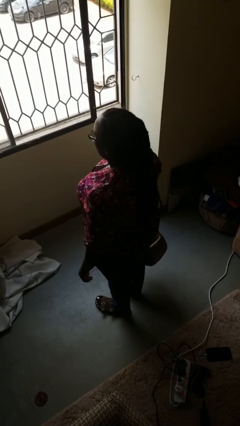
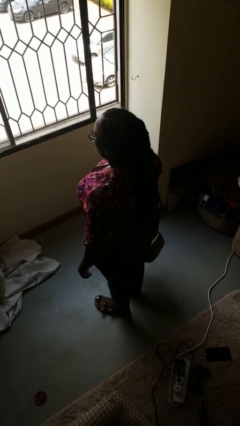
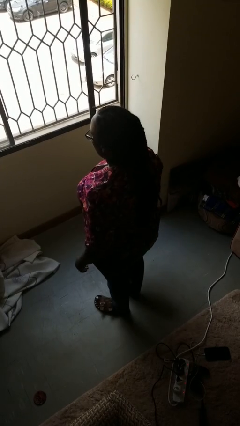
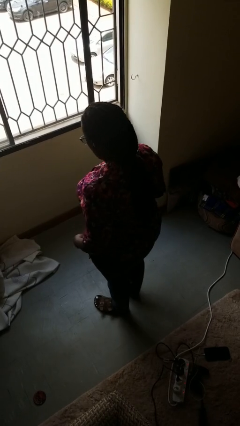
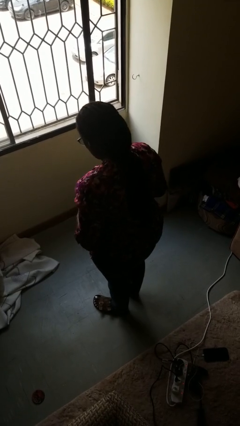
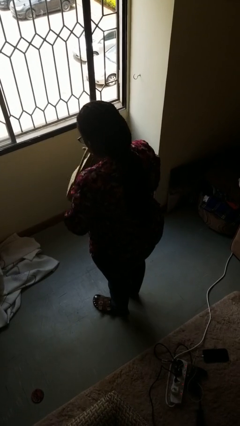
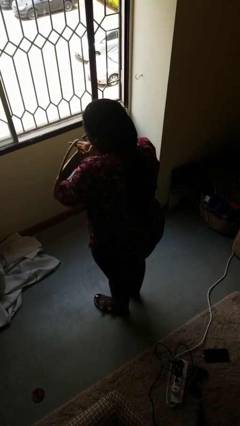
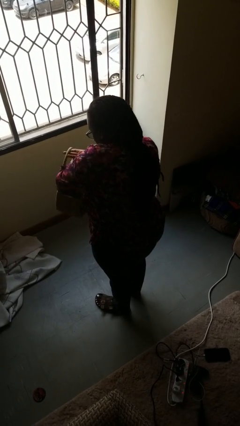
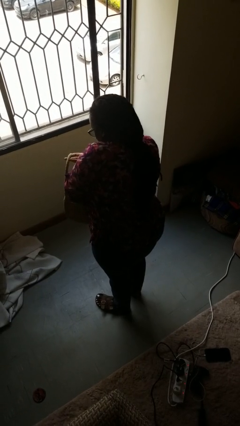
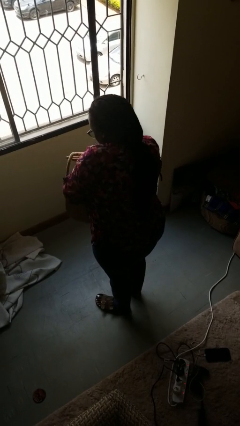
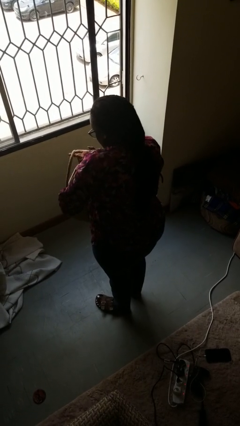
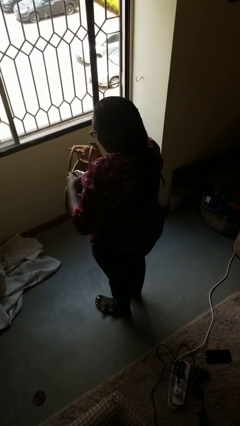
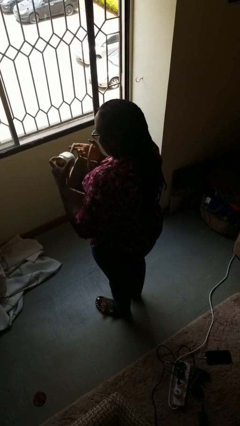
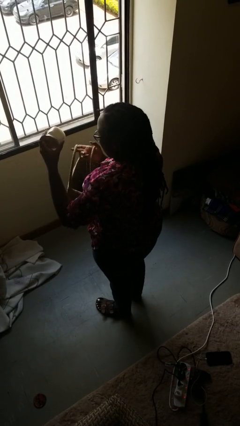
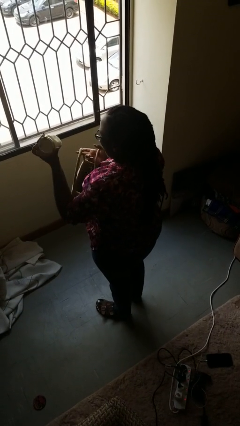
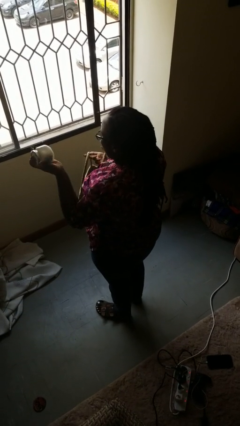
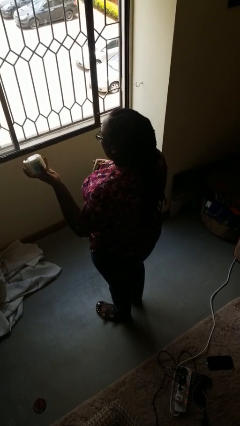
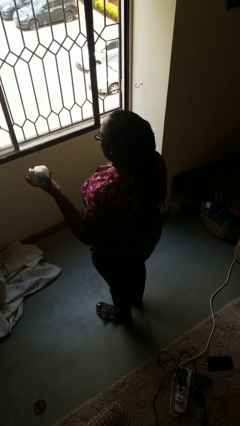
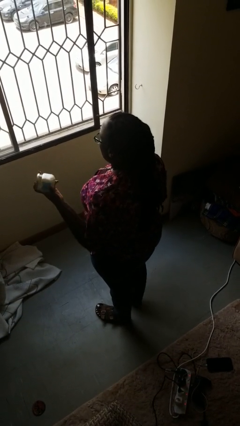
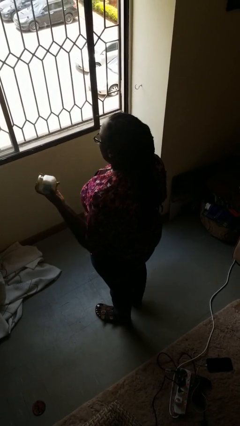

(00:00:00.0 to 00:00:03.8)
person takes object from basket

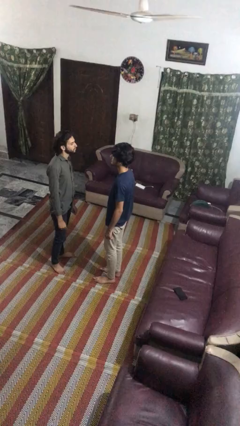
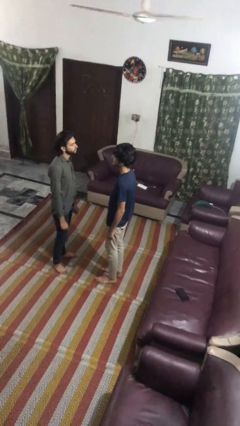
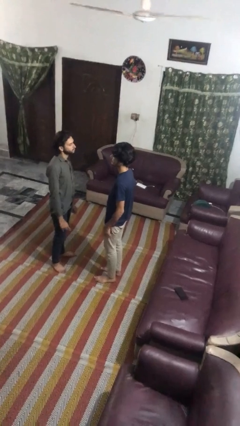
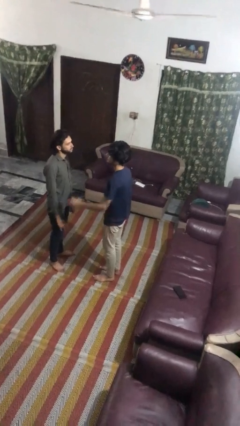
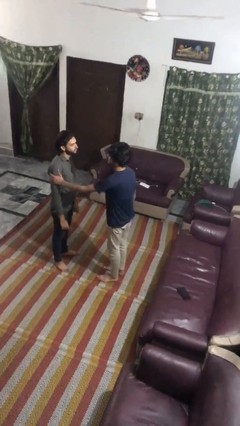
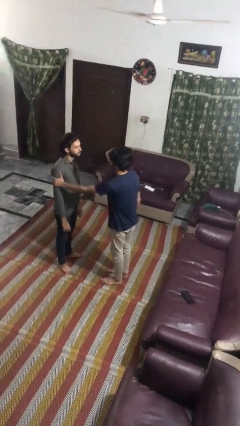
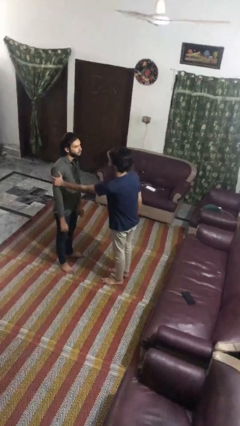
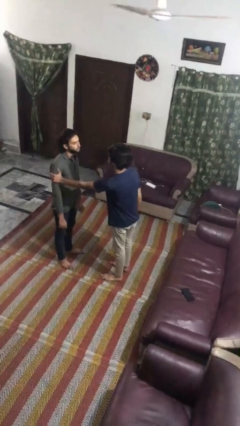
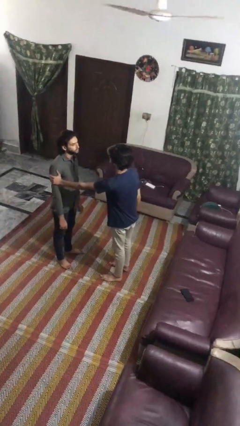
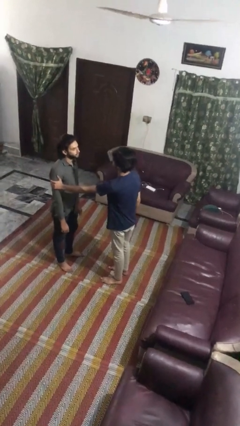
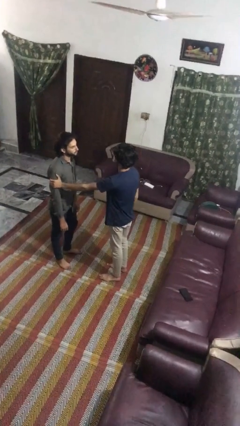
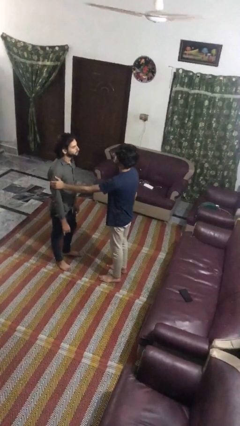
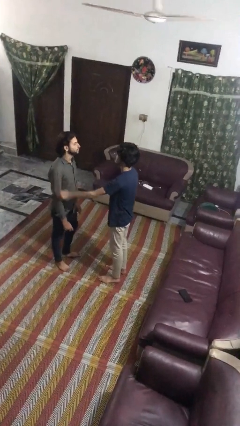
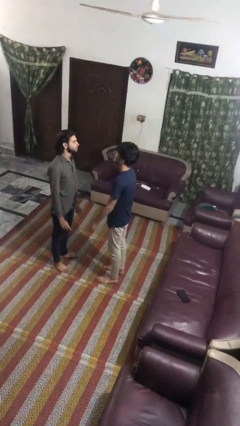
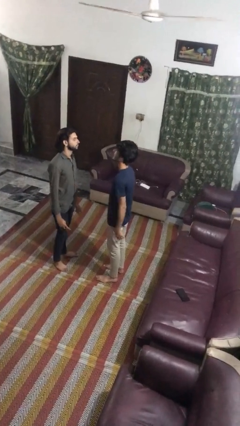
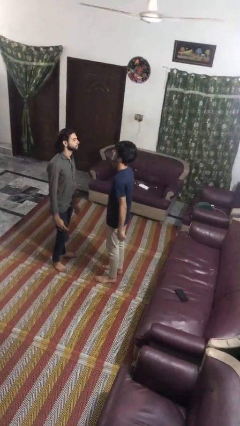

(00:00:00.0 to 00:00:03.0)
person grabs person by bicep

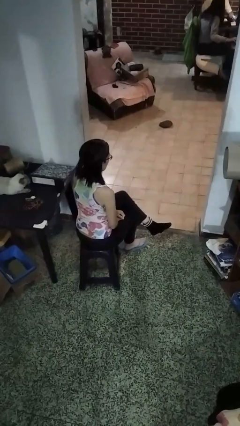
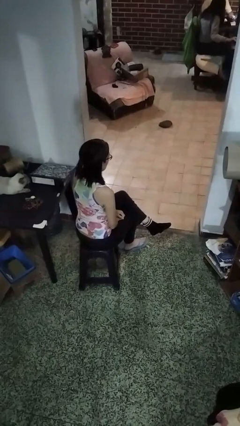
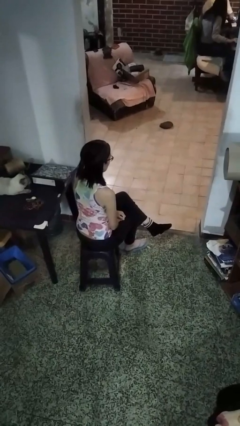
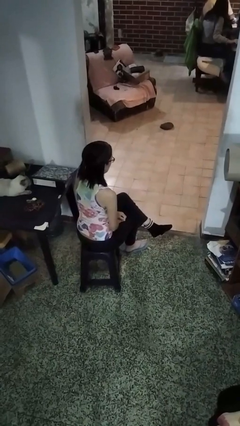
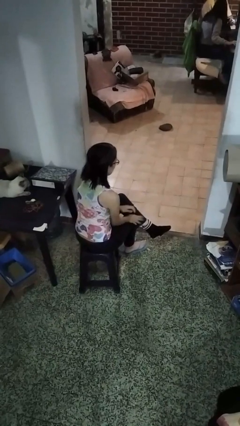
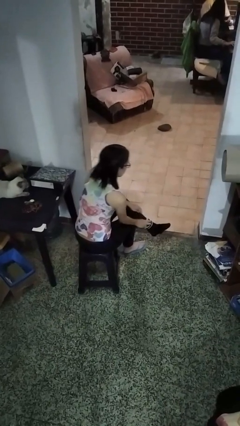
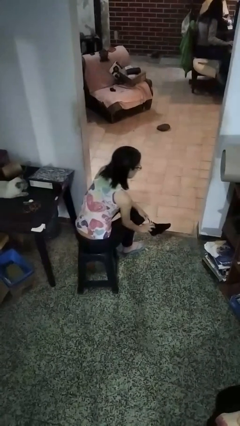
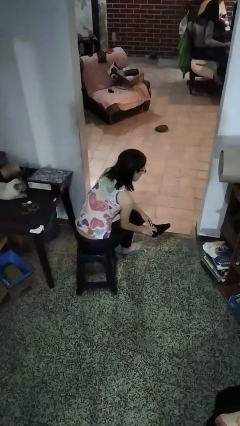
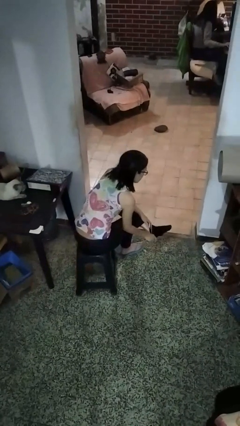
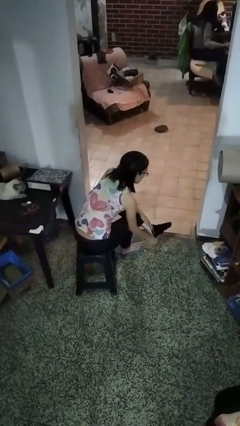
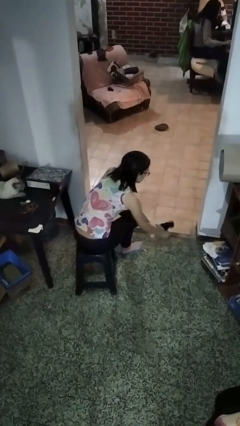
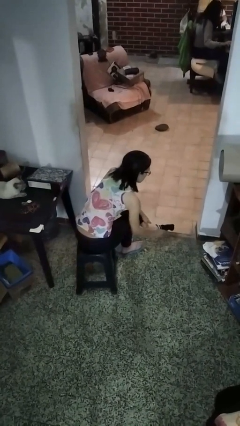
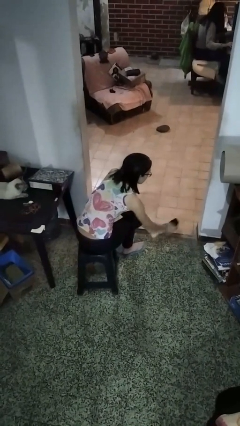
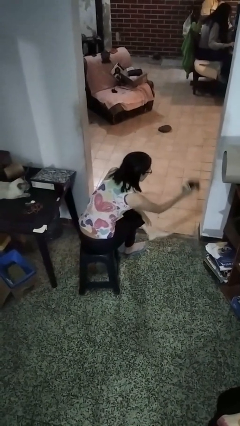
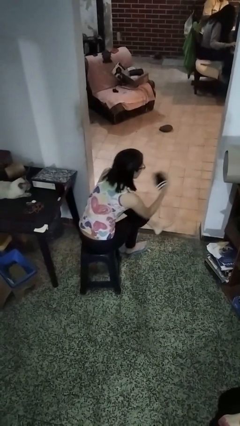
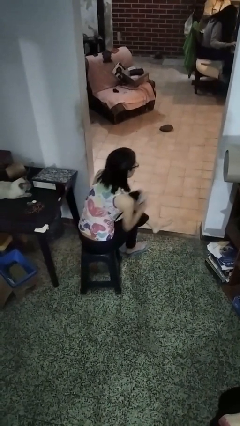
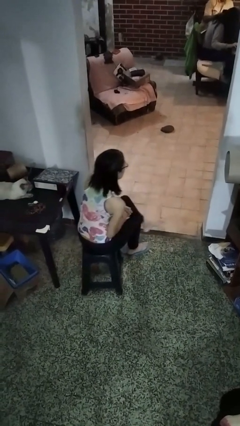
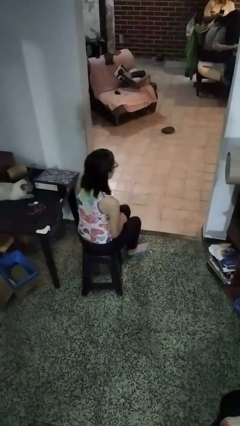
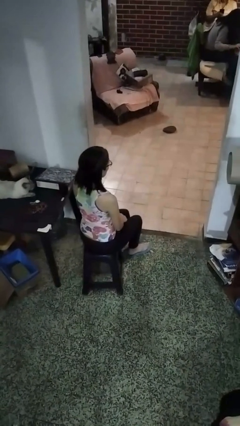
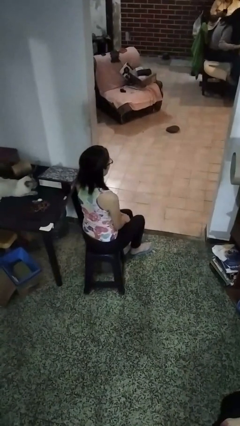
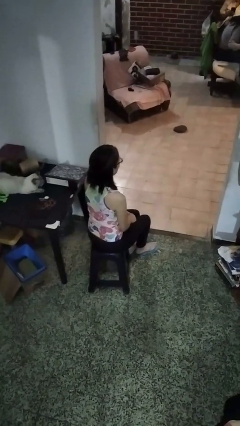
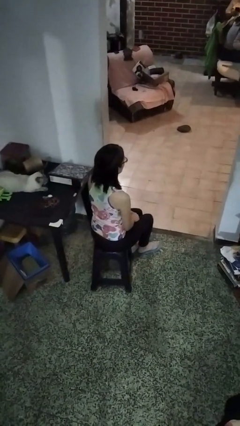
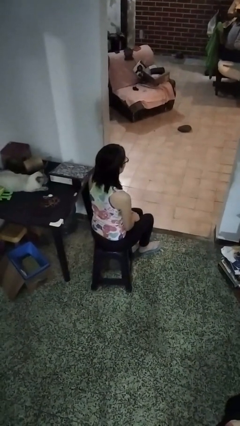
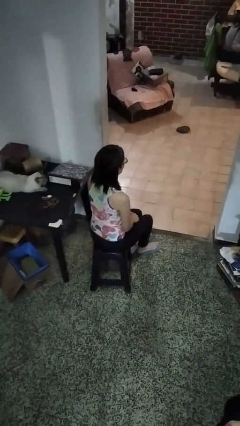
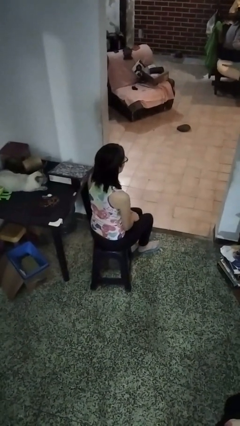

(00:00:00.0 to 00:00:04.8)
person takes off socks

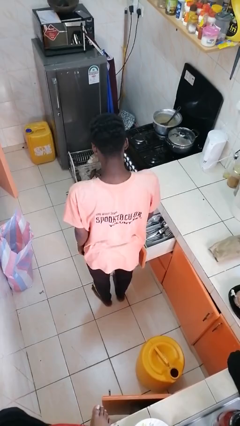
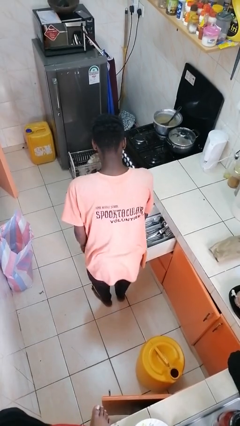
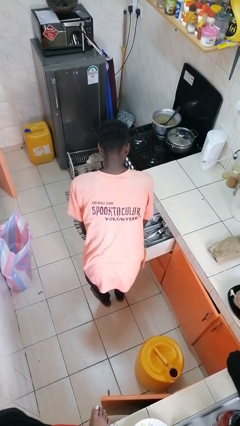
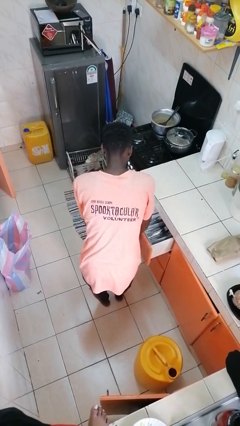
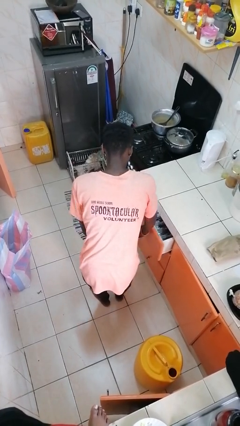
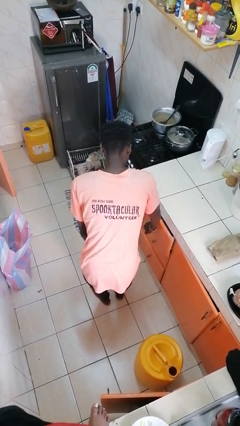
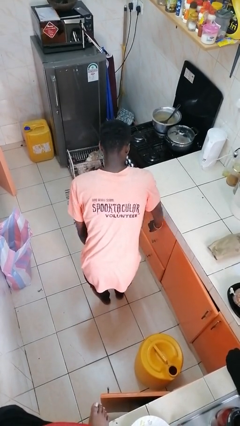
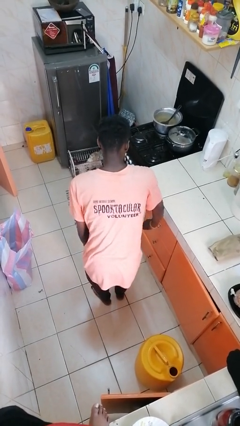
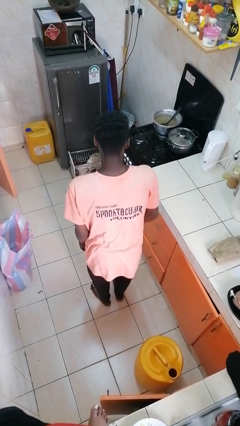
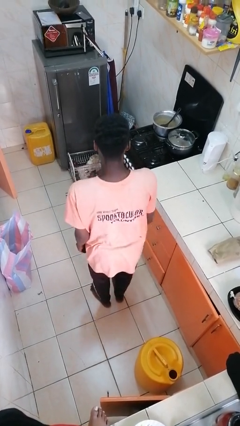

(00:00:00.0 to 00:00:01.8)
person closes kitchen drawer

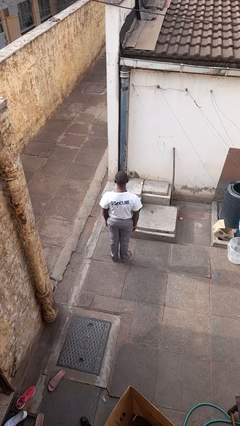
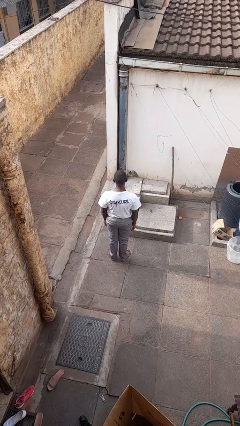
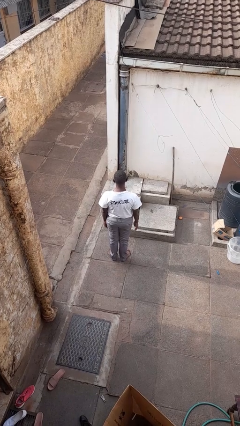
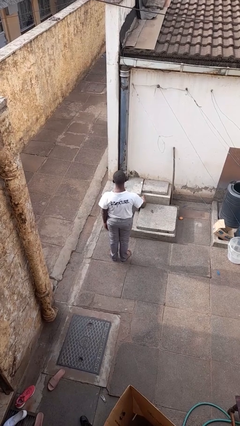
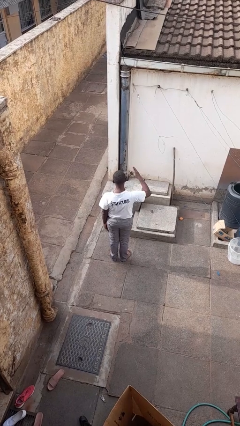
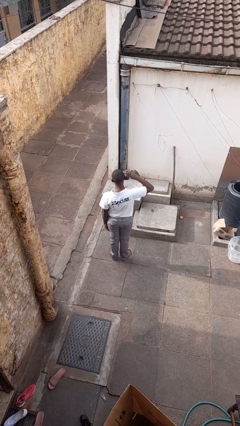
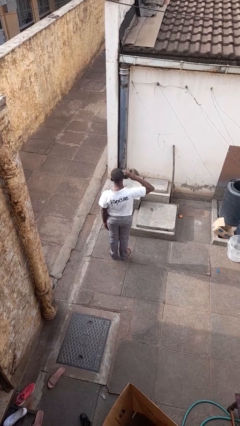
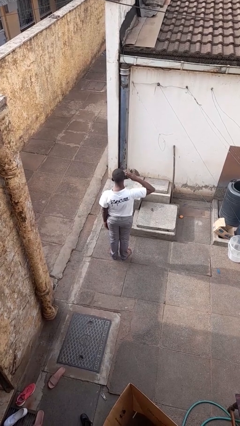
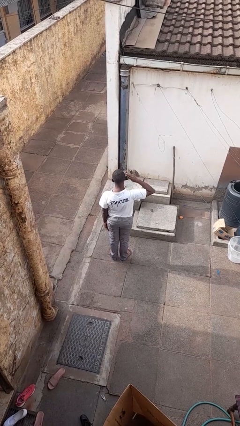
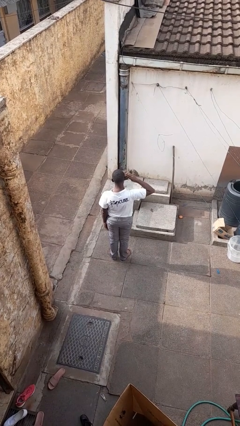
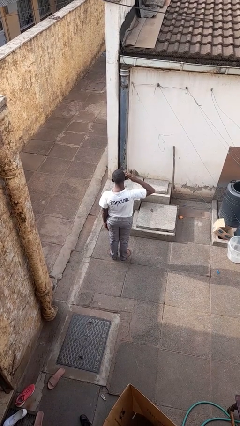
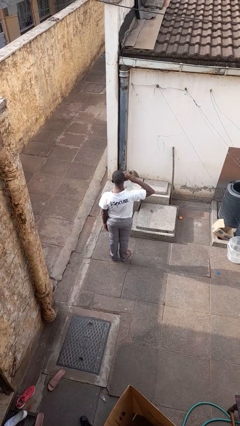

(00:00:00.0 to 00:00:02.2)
person salutes

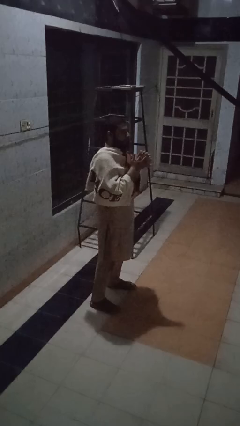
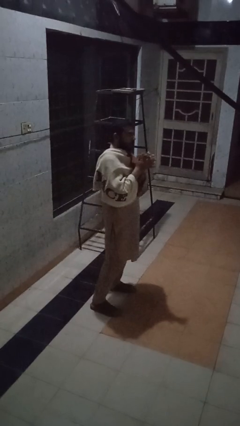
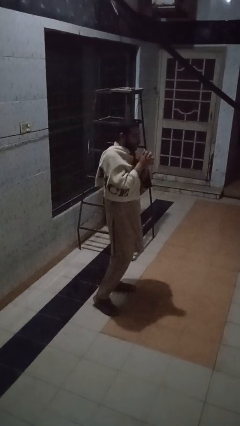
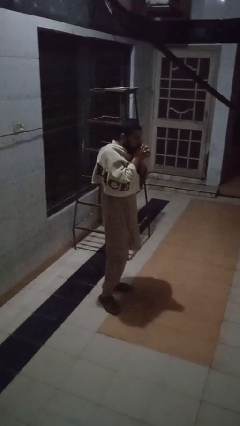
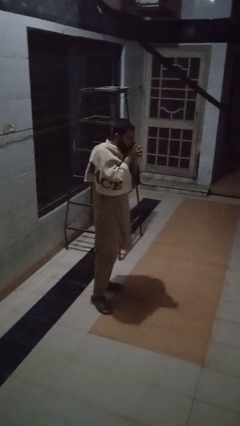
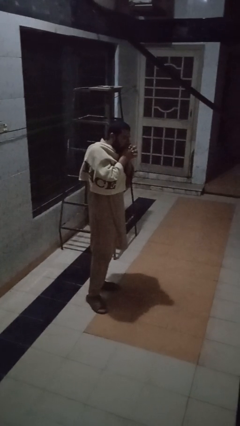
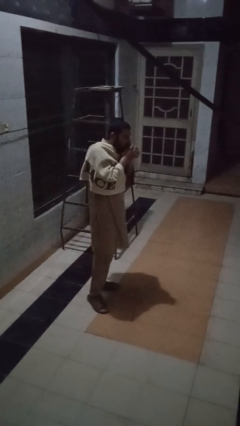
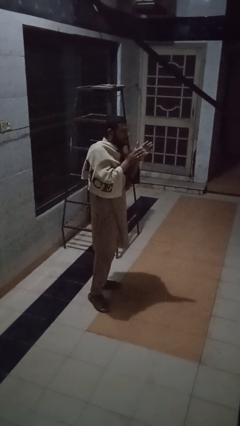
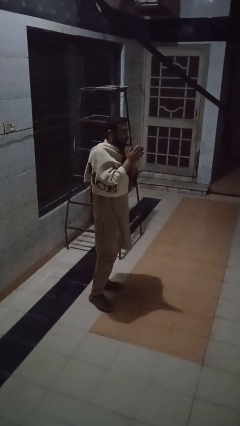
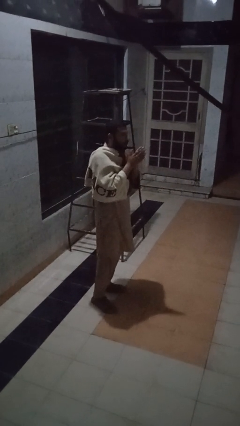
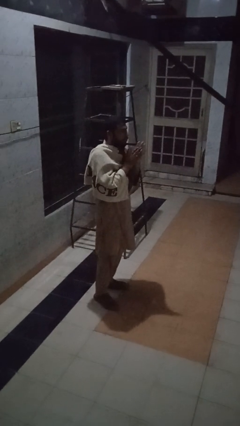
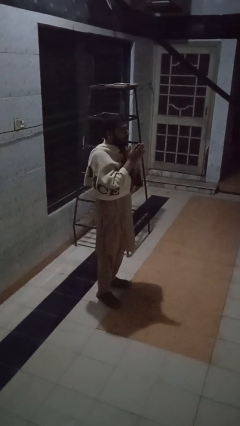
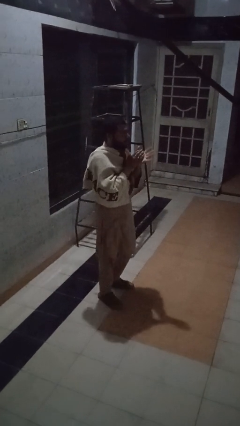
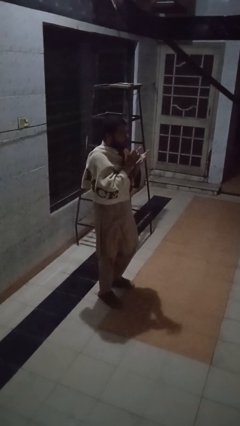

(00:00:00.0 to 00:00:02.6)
person blows into hands
